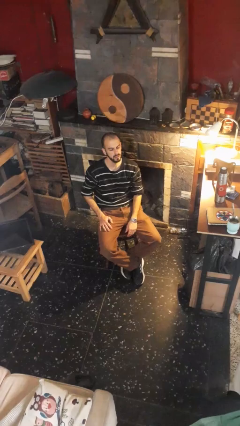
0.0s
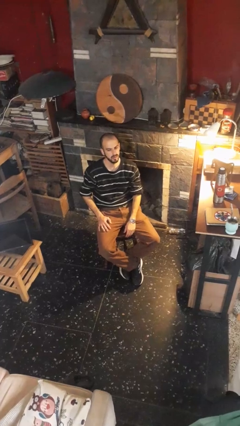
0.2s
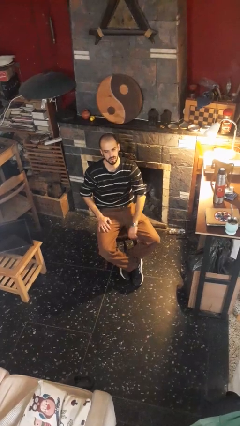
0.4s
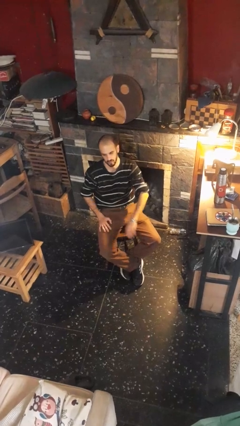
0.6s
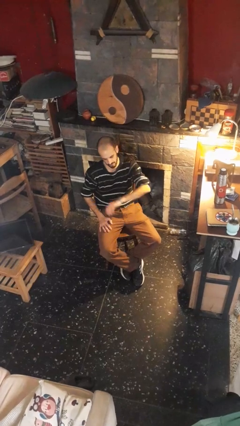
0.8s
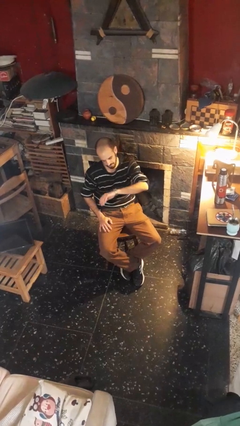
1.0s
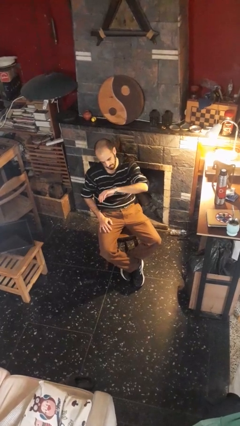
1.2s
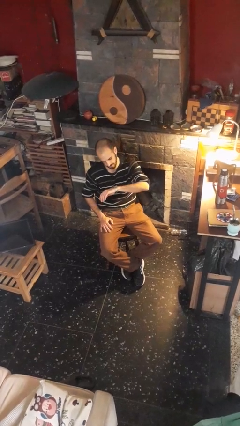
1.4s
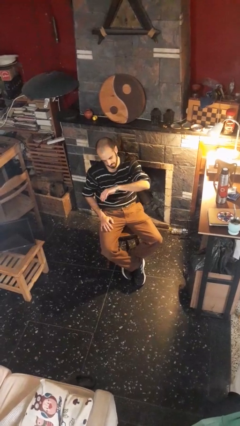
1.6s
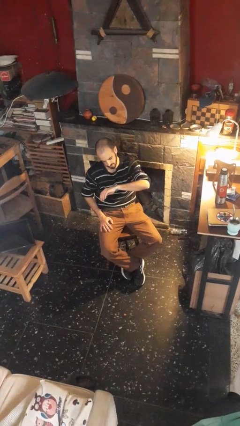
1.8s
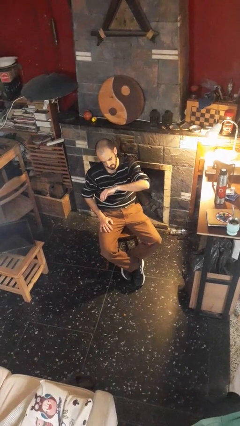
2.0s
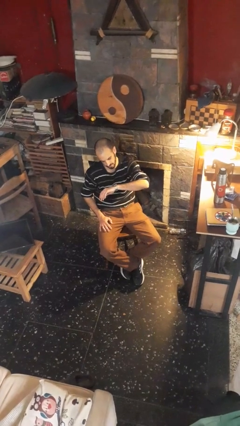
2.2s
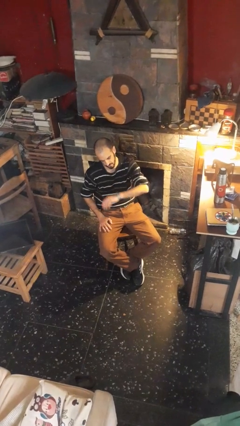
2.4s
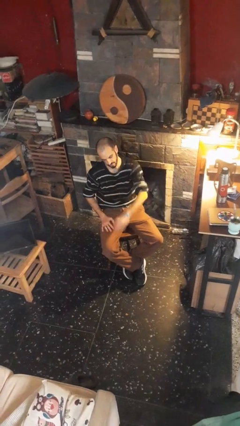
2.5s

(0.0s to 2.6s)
person looks at wristwatch

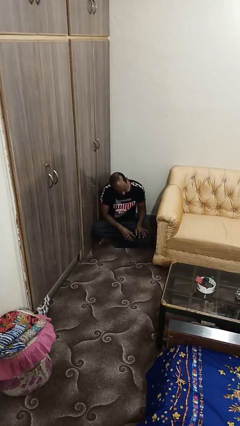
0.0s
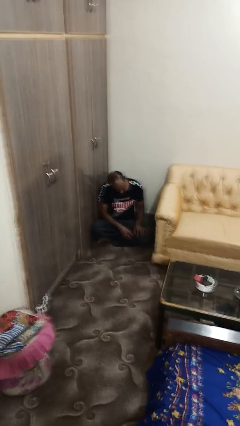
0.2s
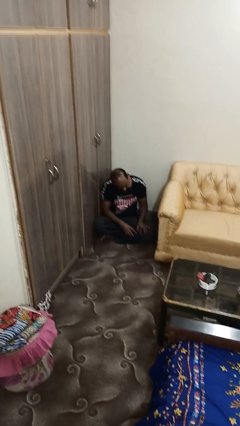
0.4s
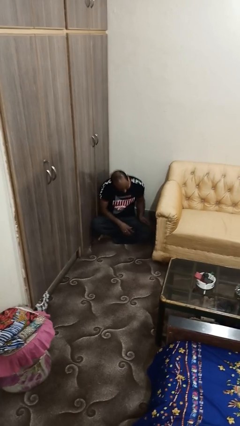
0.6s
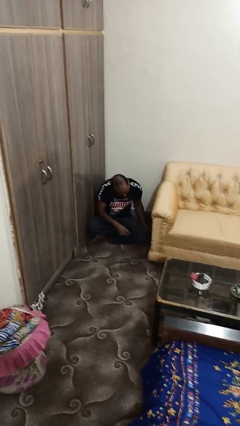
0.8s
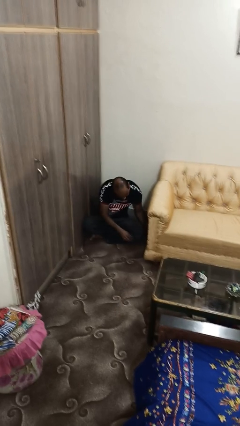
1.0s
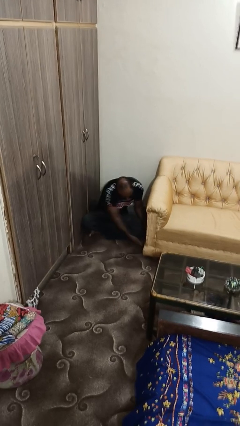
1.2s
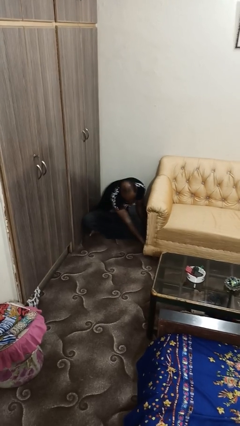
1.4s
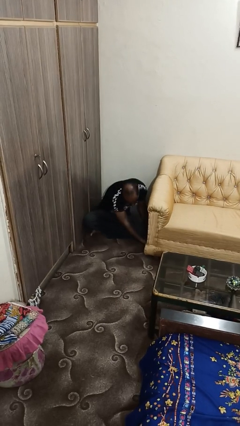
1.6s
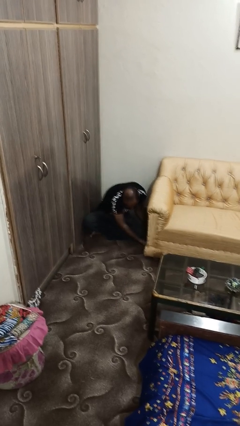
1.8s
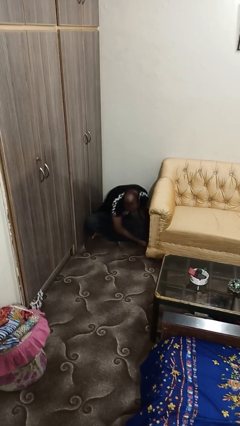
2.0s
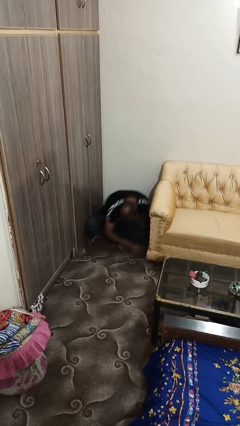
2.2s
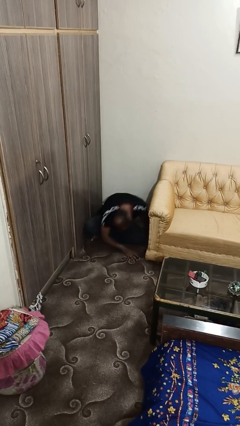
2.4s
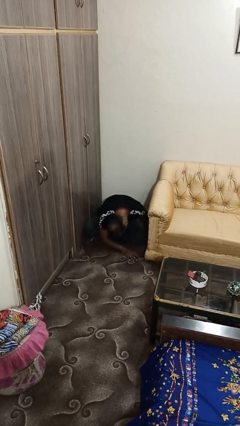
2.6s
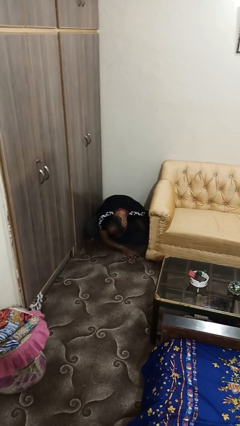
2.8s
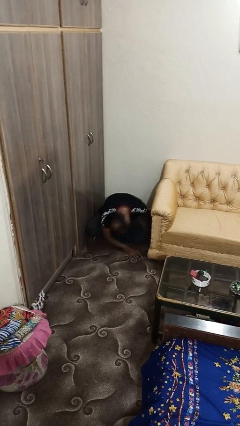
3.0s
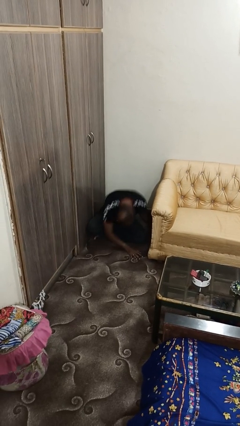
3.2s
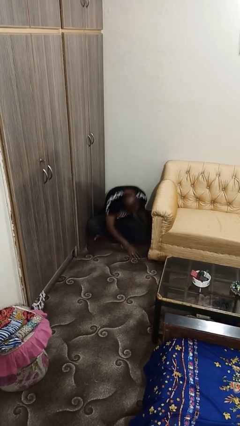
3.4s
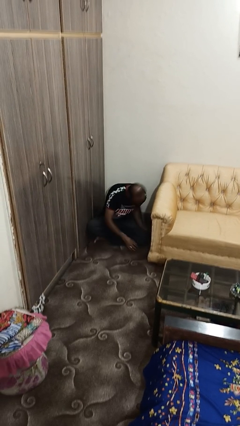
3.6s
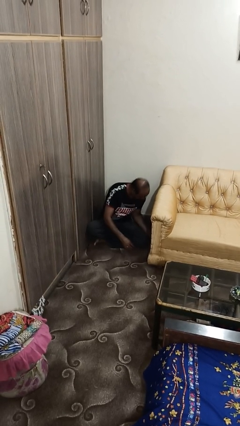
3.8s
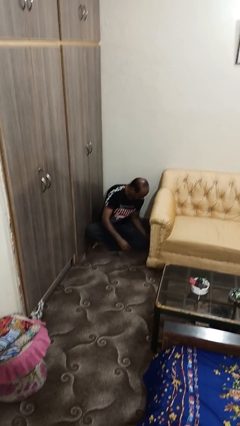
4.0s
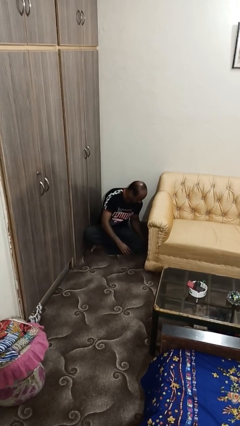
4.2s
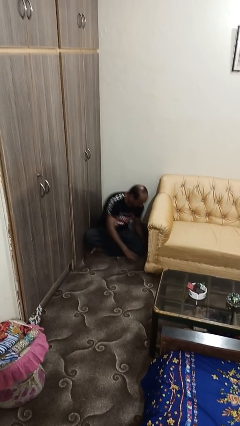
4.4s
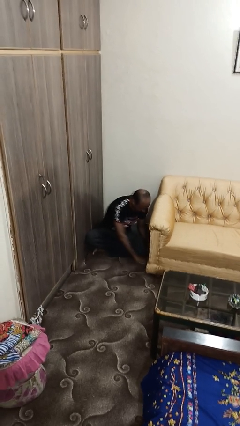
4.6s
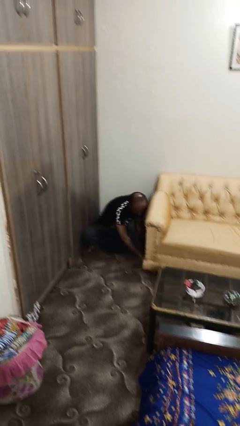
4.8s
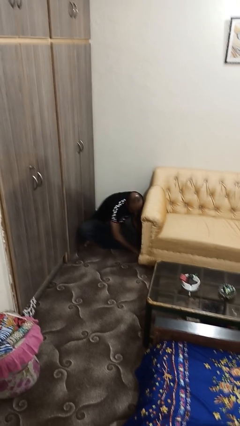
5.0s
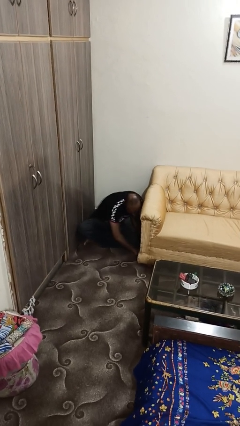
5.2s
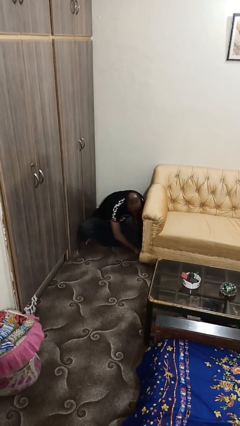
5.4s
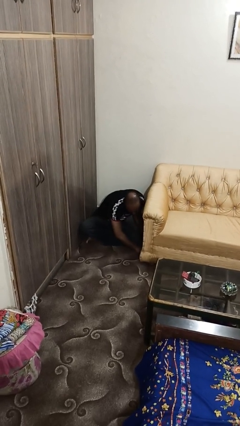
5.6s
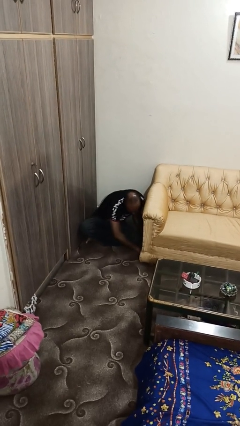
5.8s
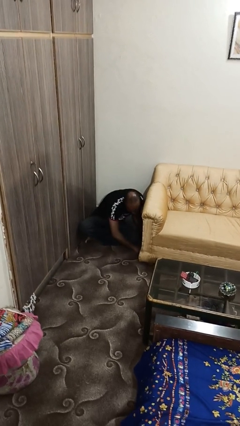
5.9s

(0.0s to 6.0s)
person searches under couch

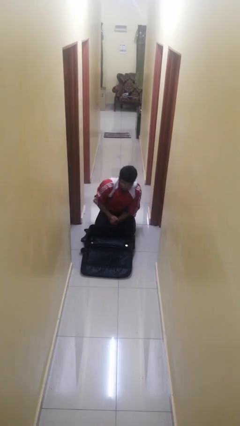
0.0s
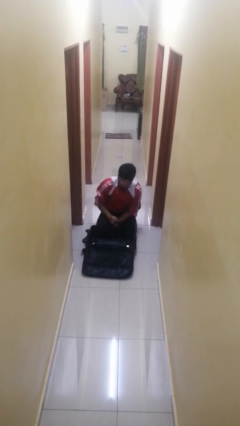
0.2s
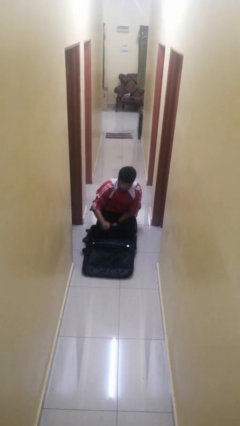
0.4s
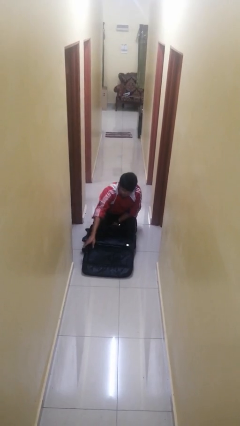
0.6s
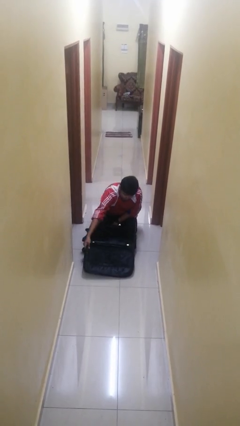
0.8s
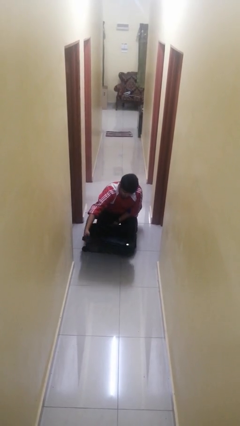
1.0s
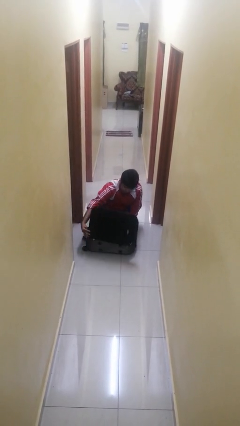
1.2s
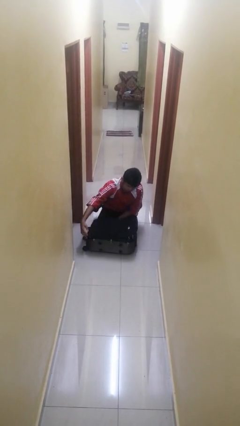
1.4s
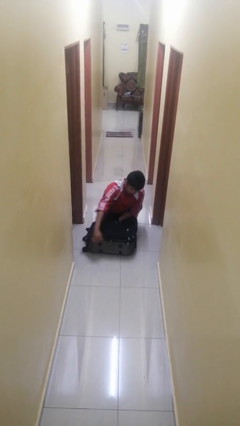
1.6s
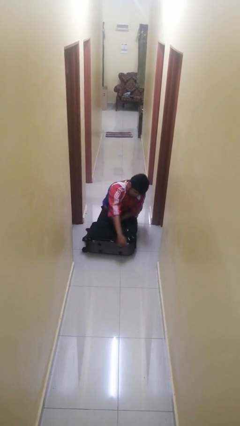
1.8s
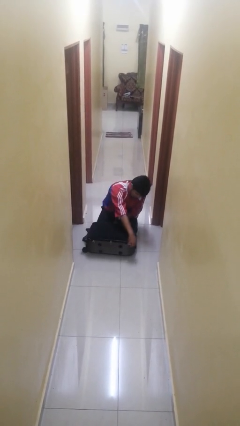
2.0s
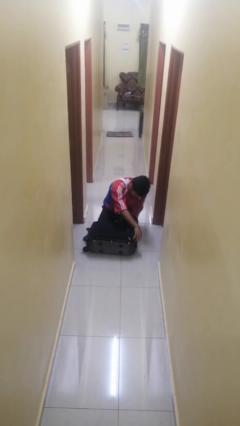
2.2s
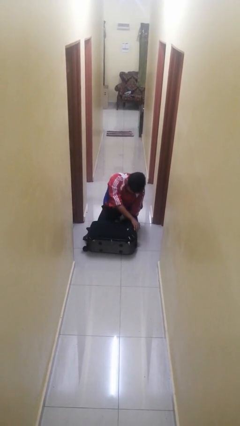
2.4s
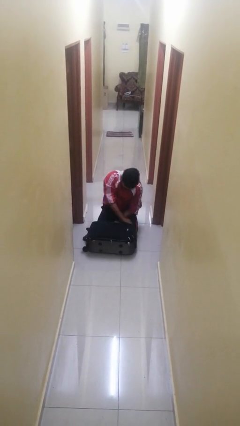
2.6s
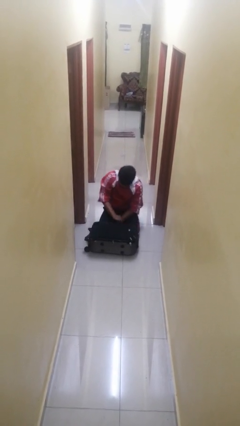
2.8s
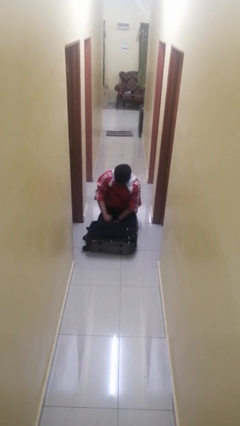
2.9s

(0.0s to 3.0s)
person closes suitcase

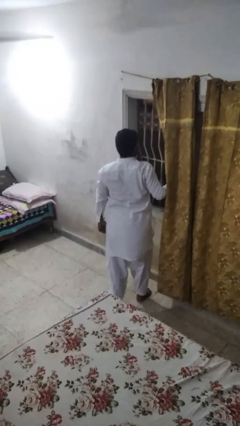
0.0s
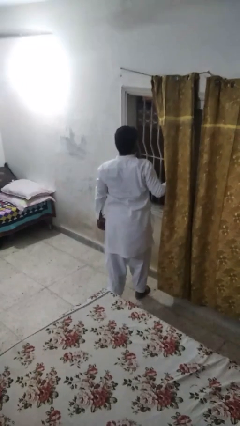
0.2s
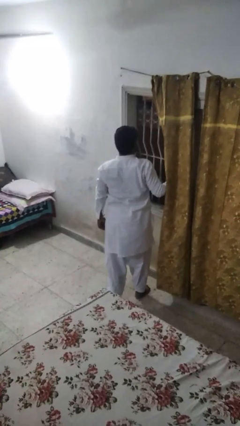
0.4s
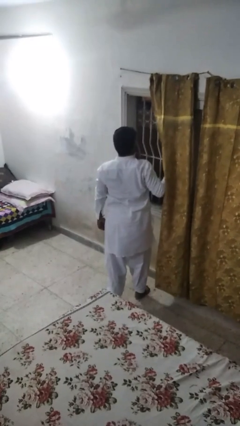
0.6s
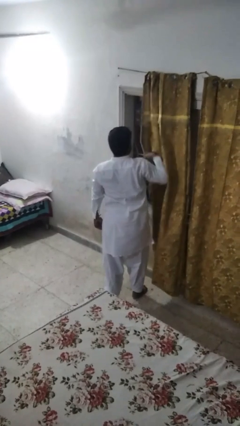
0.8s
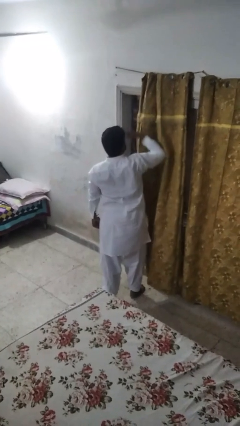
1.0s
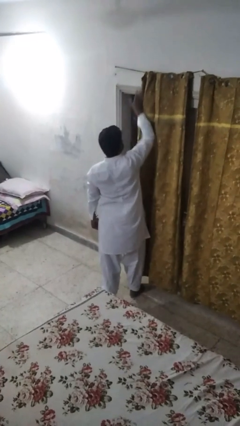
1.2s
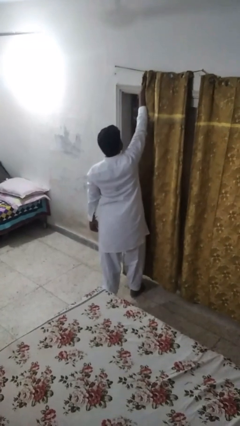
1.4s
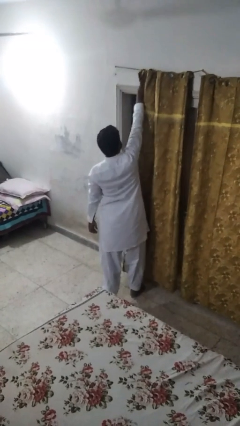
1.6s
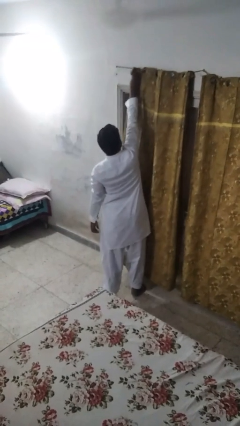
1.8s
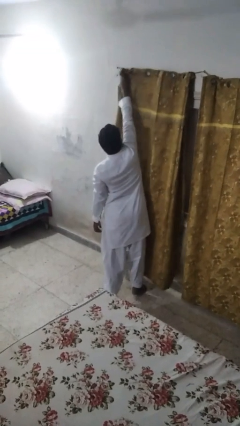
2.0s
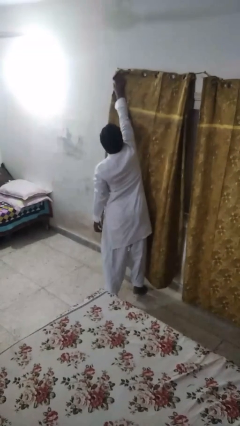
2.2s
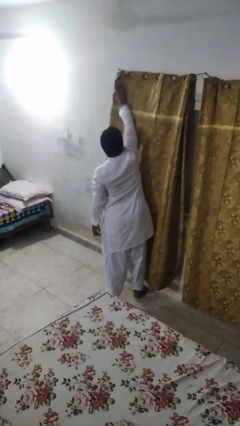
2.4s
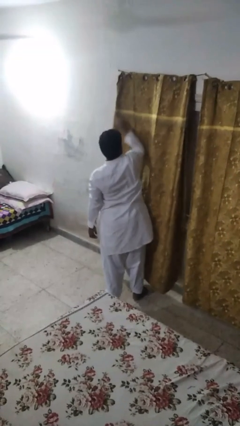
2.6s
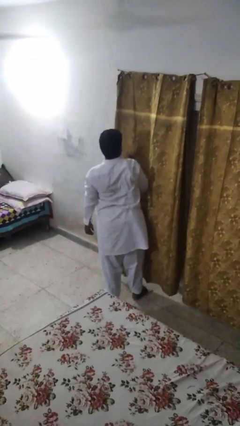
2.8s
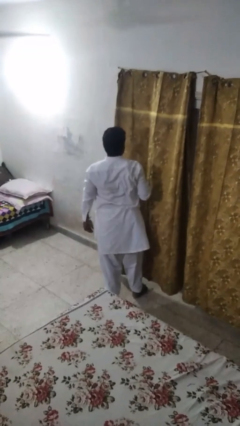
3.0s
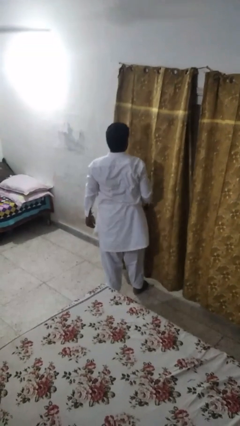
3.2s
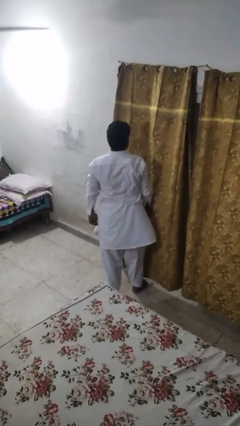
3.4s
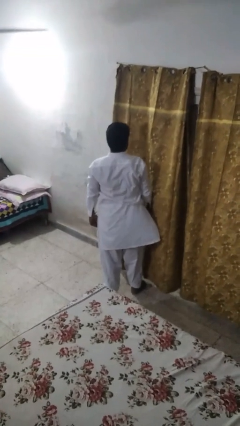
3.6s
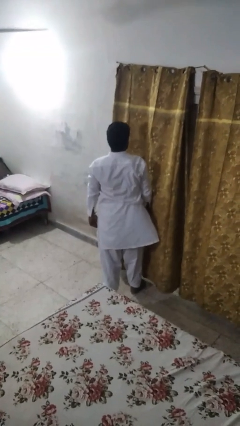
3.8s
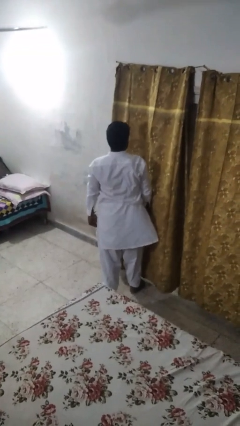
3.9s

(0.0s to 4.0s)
person closes curtains

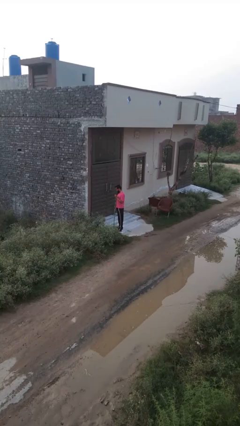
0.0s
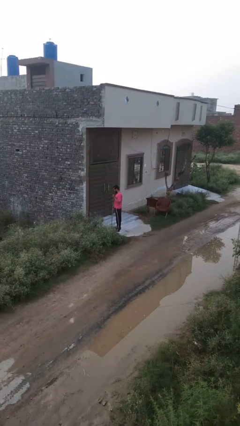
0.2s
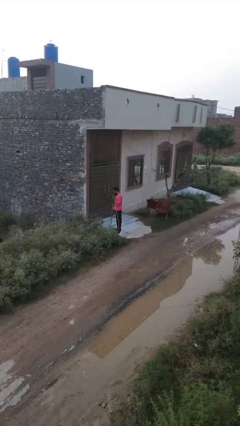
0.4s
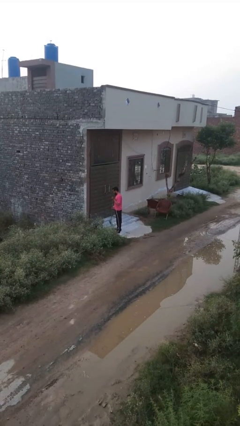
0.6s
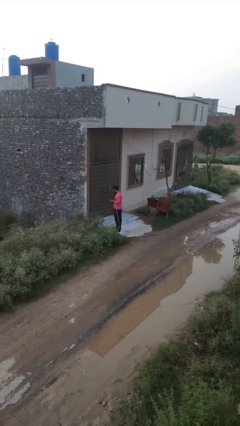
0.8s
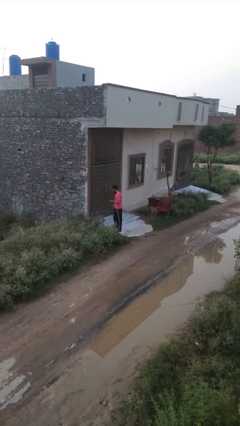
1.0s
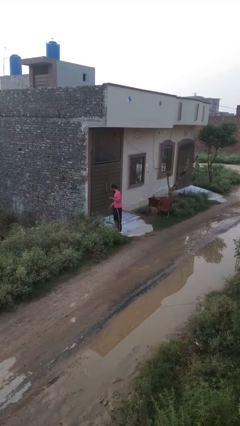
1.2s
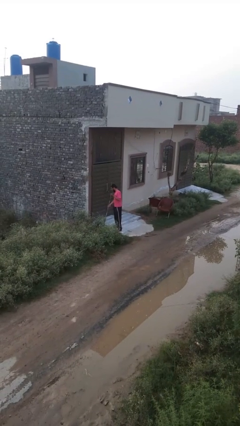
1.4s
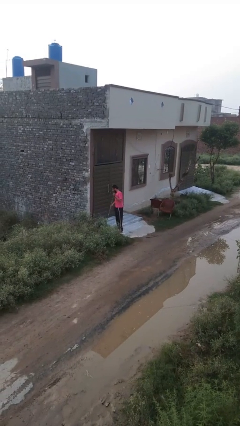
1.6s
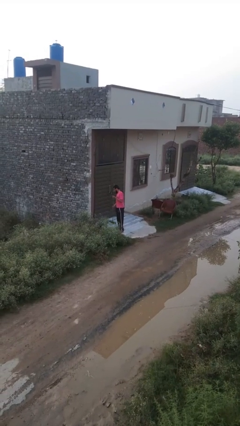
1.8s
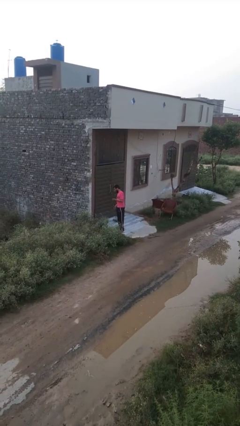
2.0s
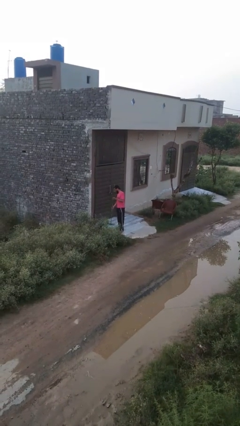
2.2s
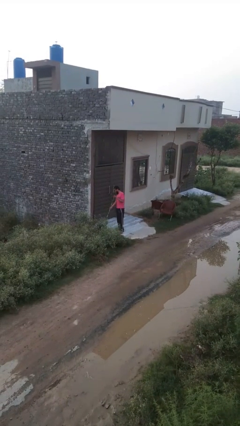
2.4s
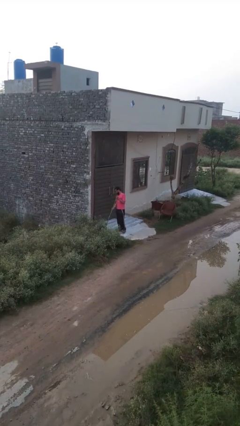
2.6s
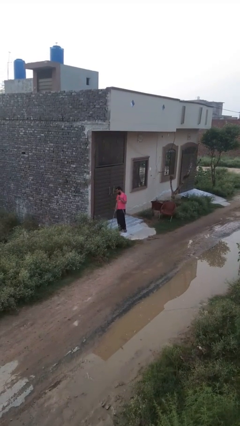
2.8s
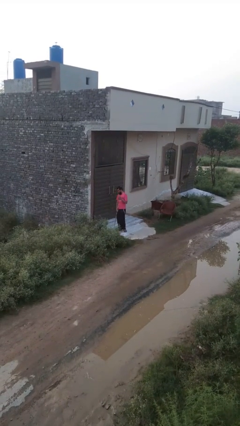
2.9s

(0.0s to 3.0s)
person sweeps floor
